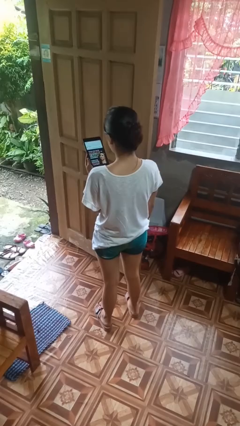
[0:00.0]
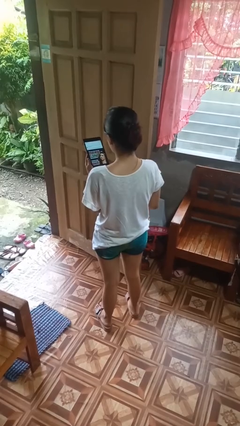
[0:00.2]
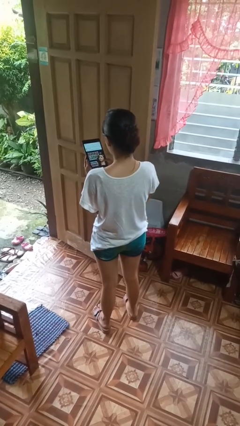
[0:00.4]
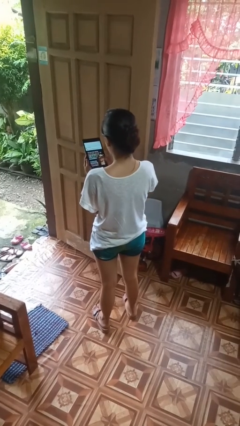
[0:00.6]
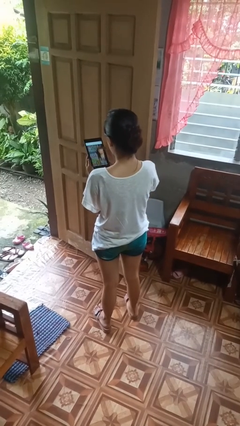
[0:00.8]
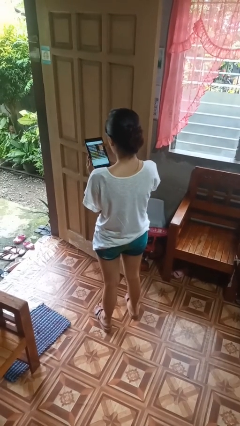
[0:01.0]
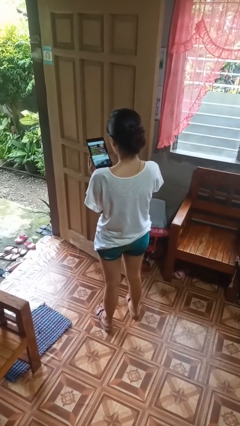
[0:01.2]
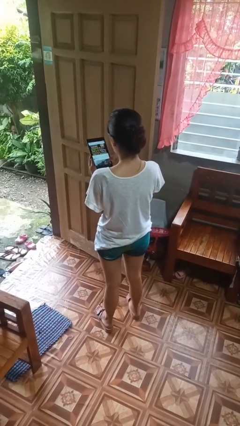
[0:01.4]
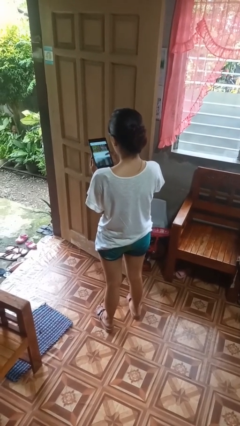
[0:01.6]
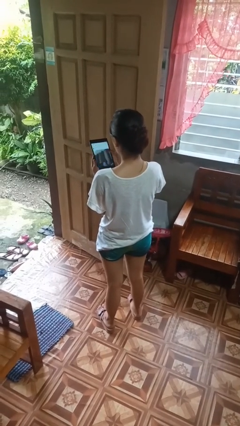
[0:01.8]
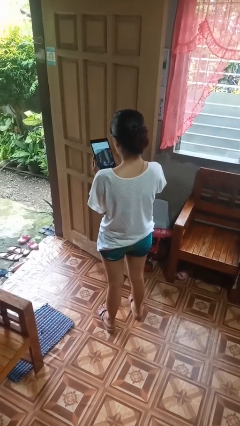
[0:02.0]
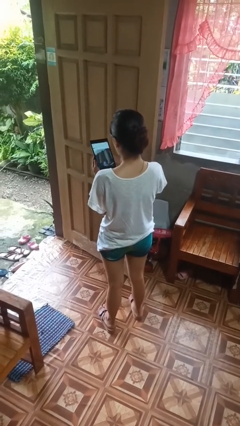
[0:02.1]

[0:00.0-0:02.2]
person interacts with tablet

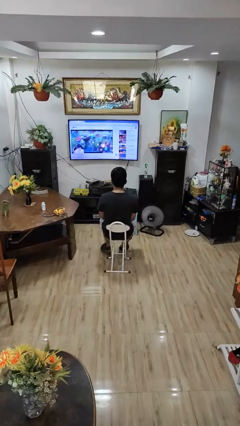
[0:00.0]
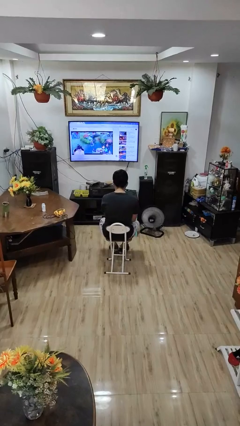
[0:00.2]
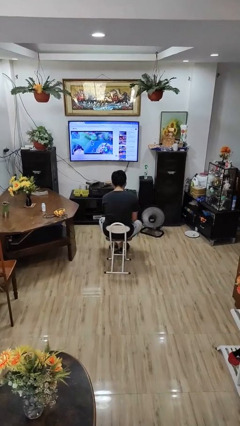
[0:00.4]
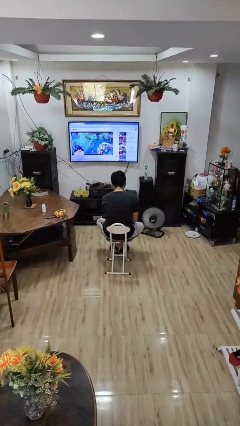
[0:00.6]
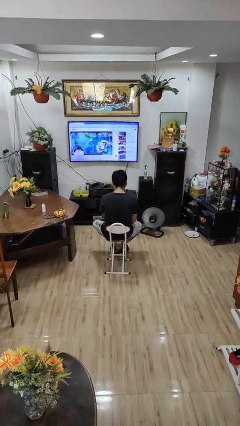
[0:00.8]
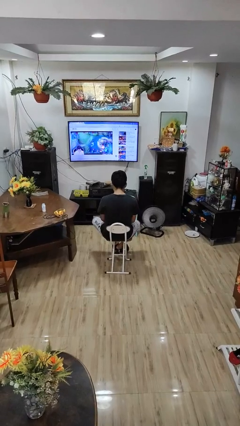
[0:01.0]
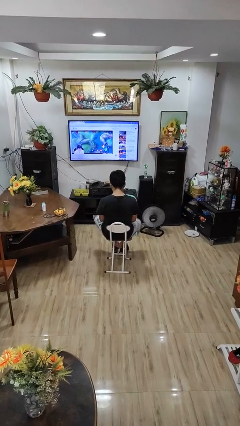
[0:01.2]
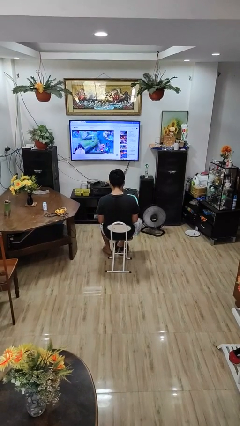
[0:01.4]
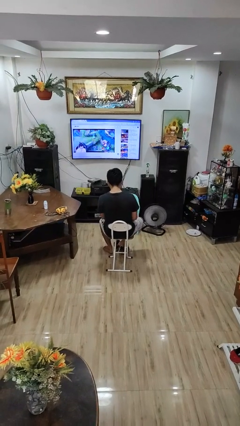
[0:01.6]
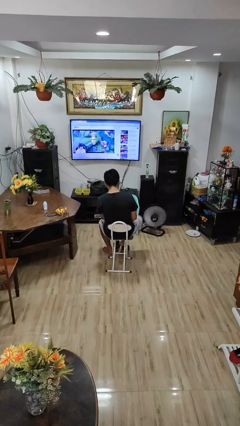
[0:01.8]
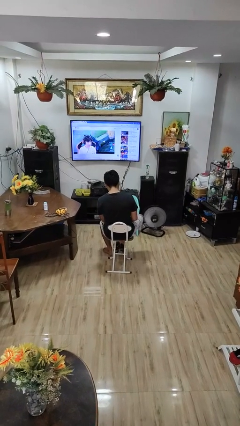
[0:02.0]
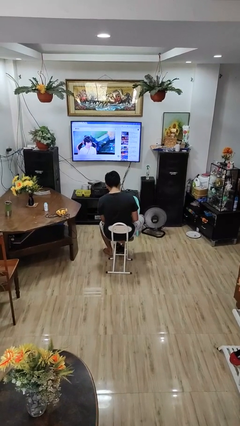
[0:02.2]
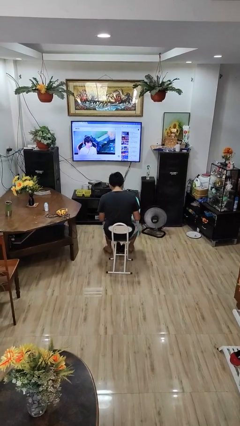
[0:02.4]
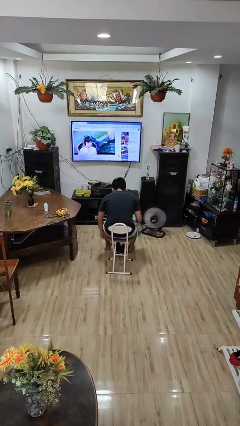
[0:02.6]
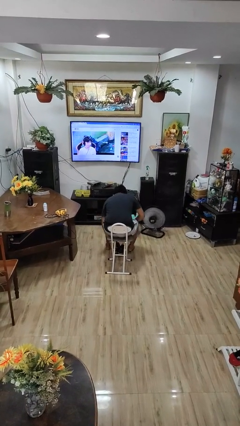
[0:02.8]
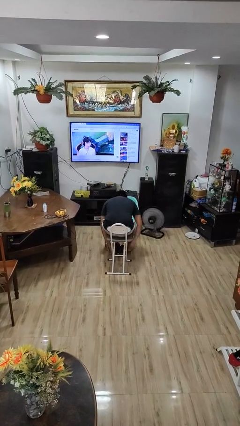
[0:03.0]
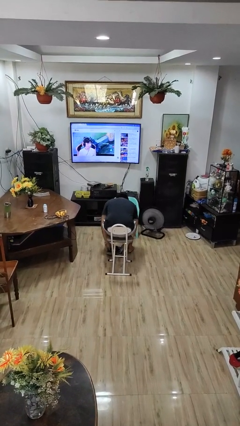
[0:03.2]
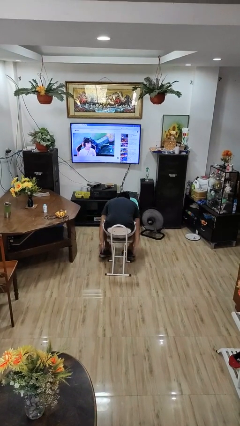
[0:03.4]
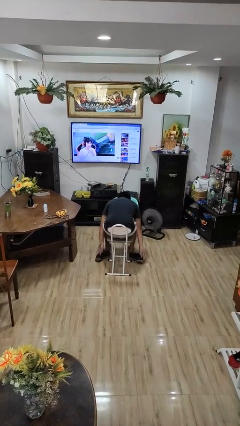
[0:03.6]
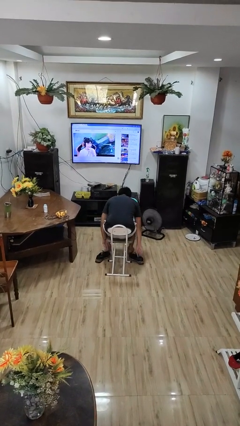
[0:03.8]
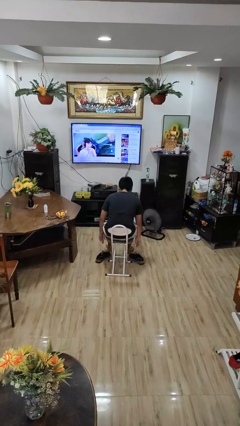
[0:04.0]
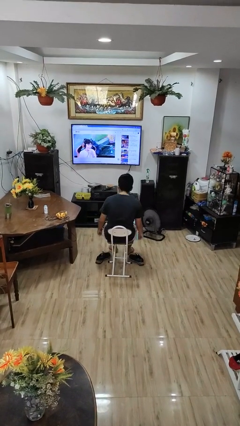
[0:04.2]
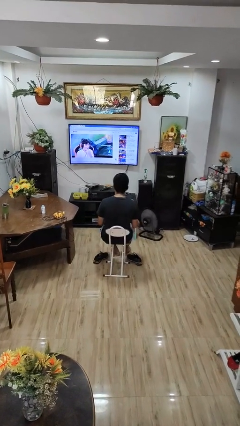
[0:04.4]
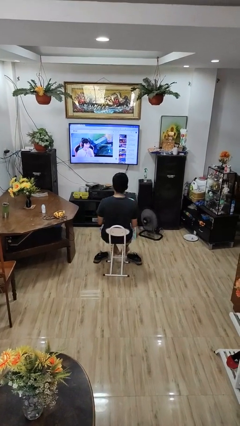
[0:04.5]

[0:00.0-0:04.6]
person takes off shoes

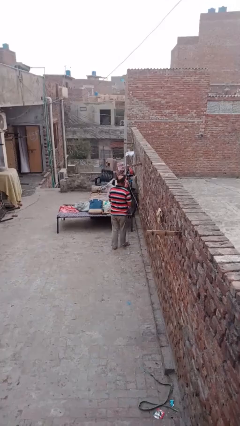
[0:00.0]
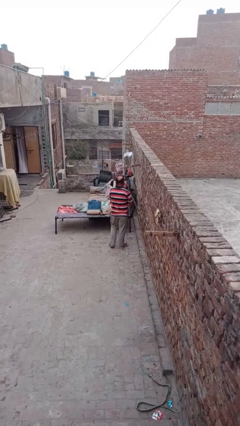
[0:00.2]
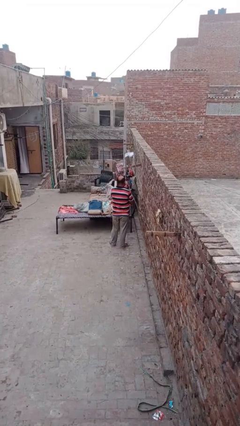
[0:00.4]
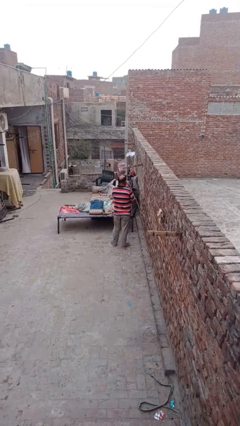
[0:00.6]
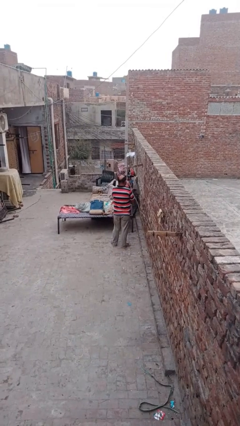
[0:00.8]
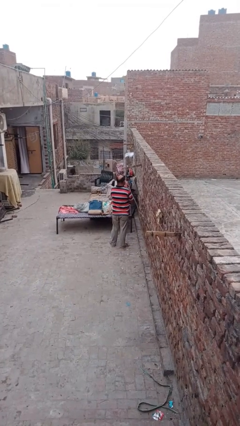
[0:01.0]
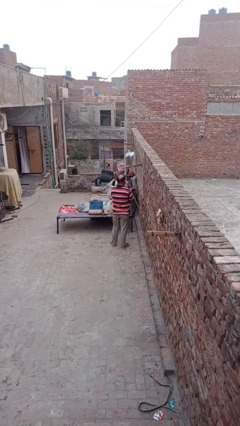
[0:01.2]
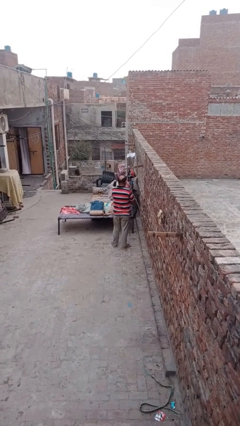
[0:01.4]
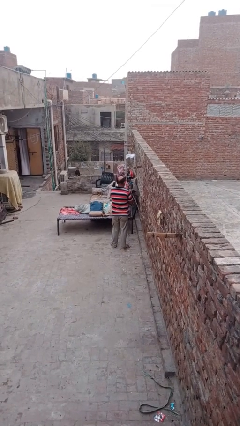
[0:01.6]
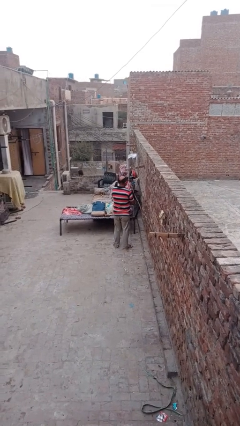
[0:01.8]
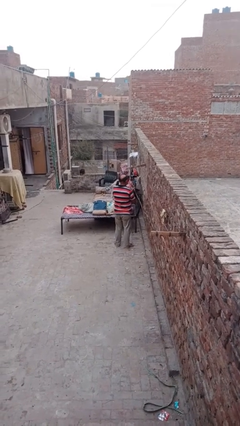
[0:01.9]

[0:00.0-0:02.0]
person blows into hands

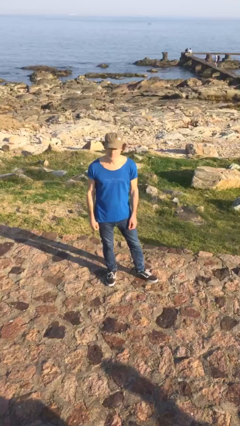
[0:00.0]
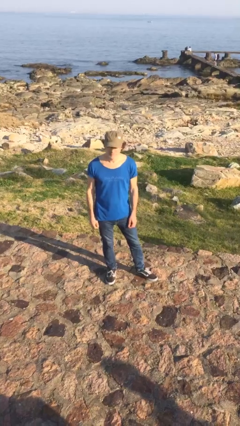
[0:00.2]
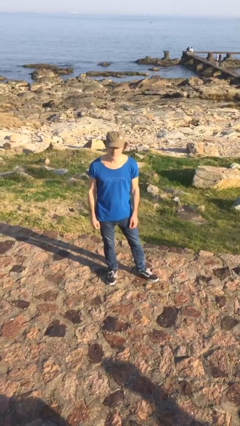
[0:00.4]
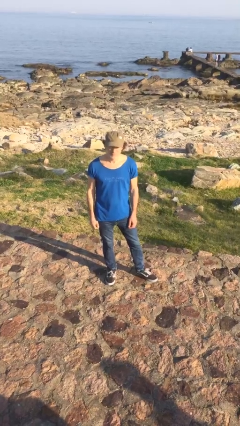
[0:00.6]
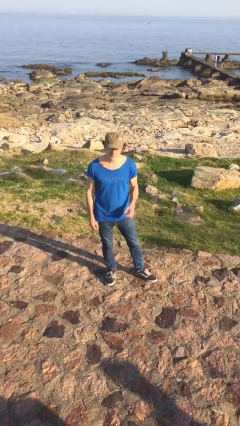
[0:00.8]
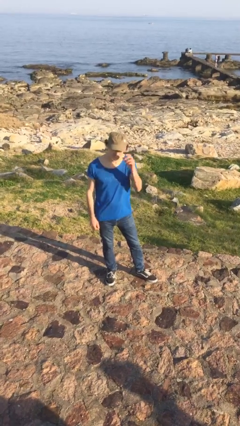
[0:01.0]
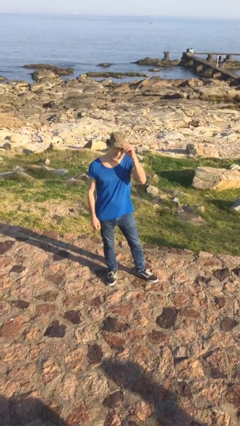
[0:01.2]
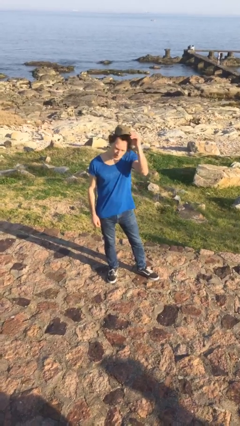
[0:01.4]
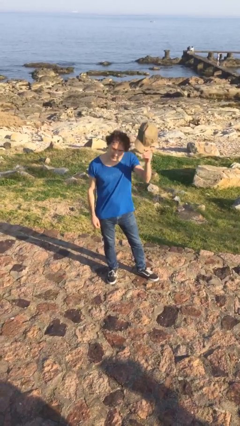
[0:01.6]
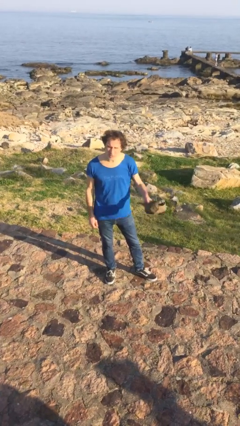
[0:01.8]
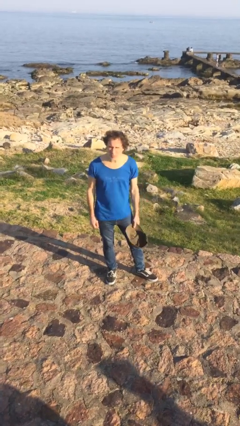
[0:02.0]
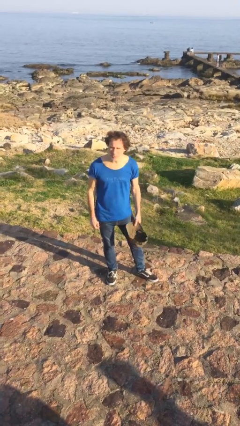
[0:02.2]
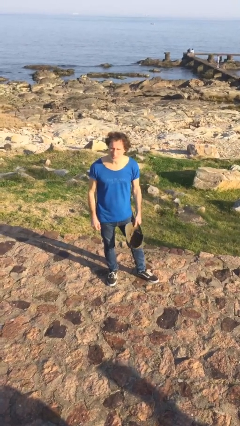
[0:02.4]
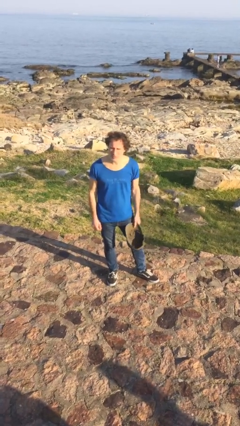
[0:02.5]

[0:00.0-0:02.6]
person takes off hat

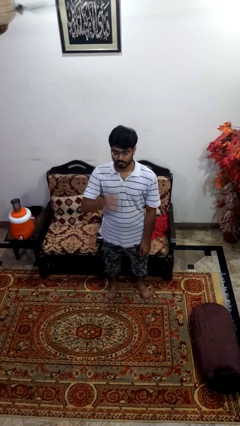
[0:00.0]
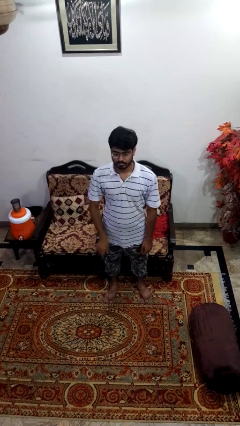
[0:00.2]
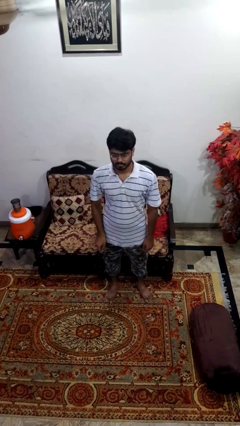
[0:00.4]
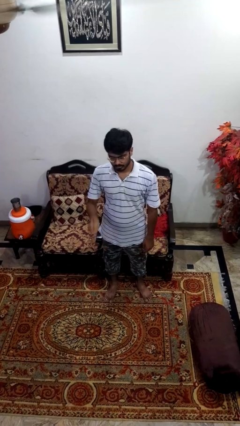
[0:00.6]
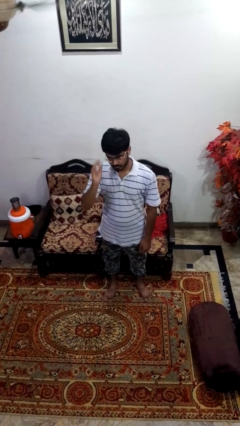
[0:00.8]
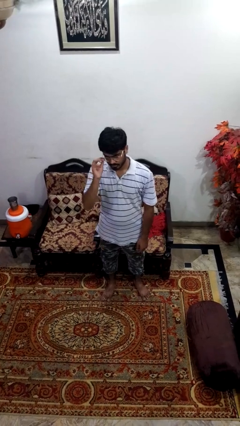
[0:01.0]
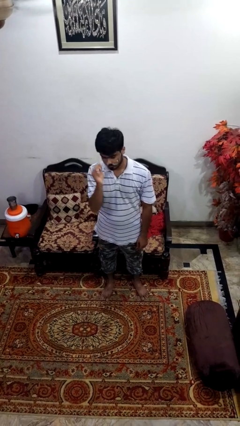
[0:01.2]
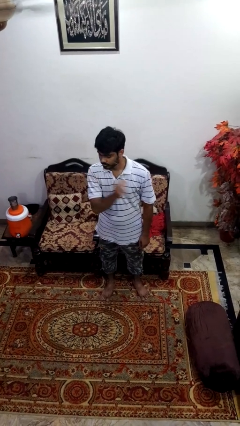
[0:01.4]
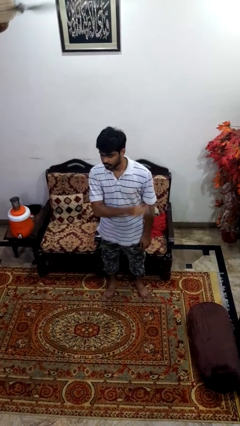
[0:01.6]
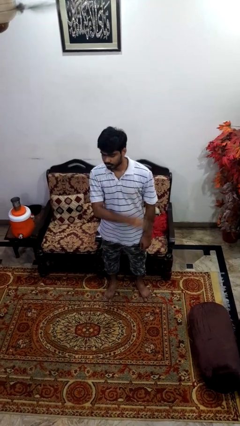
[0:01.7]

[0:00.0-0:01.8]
person takes off glasses

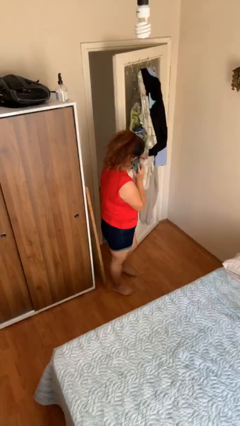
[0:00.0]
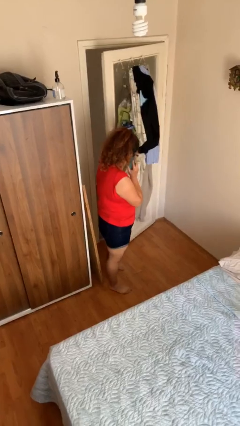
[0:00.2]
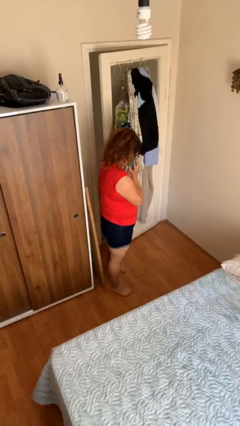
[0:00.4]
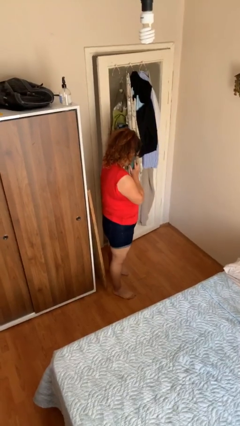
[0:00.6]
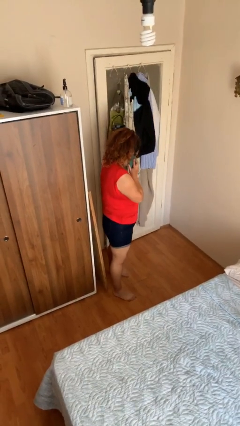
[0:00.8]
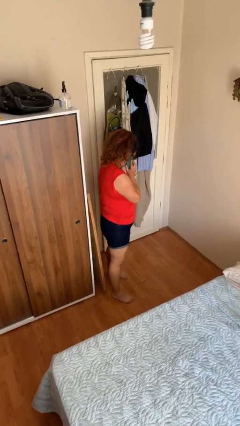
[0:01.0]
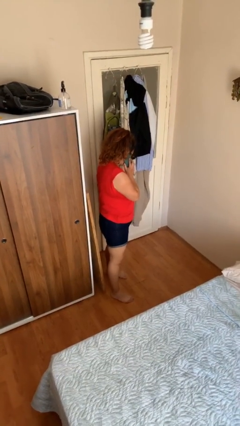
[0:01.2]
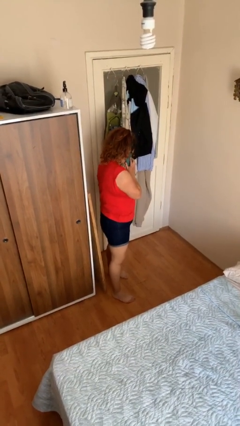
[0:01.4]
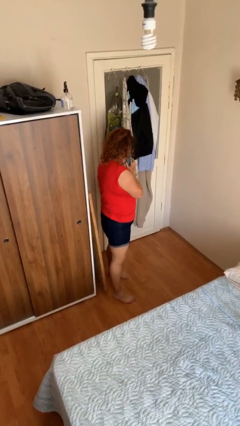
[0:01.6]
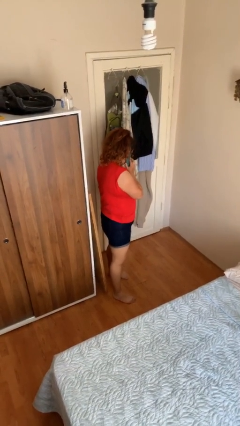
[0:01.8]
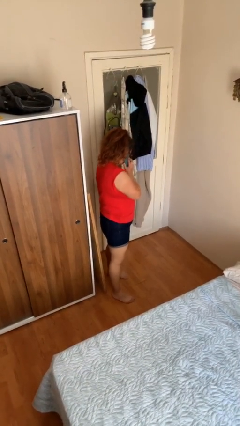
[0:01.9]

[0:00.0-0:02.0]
person closes facility door

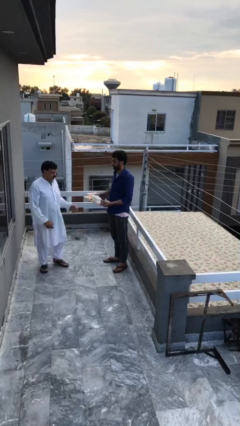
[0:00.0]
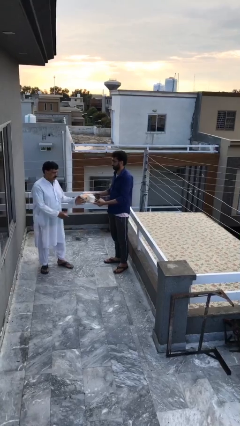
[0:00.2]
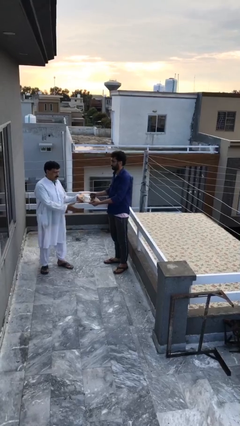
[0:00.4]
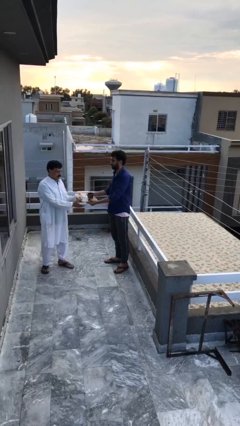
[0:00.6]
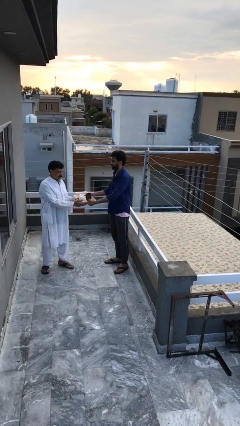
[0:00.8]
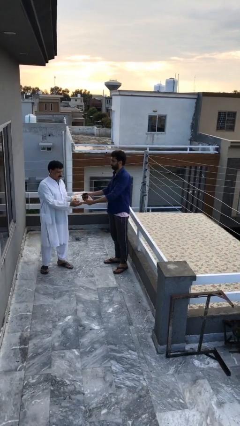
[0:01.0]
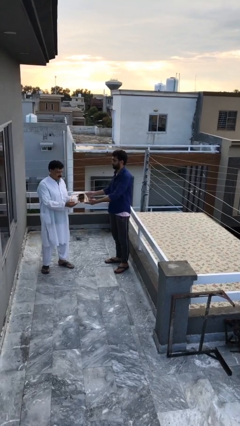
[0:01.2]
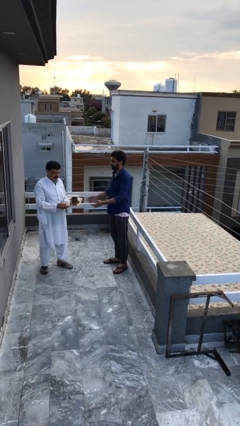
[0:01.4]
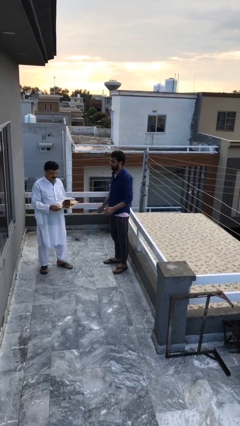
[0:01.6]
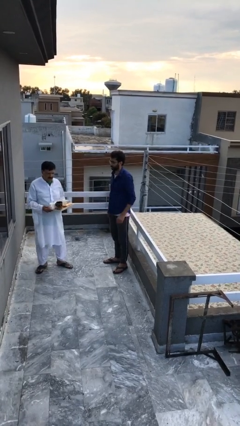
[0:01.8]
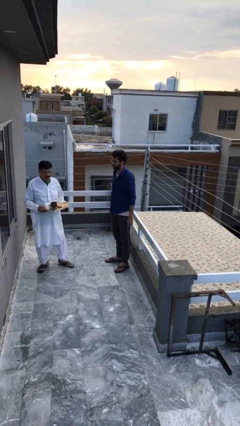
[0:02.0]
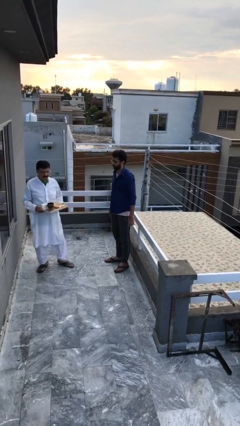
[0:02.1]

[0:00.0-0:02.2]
person transfers object to person
